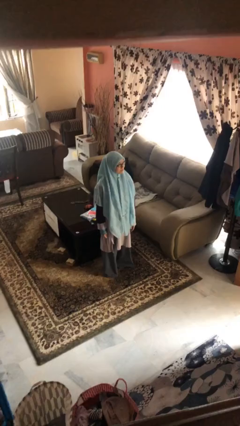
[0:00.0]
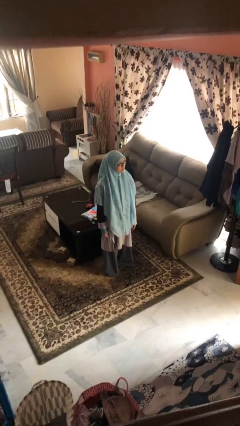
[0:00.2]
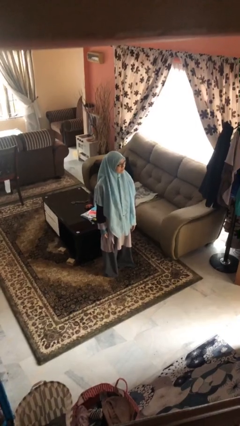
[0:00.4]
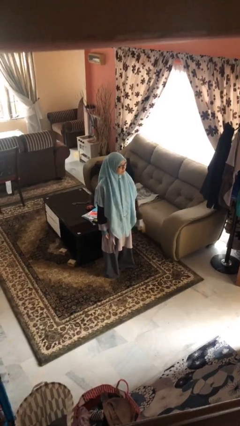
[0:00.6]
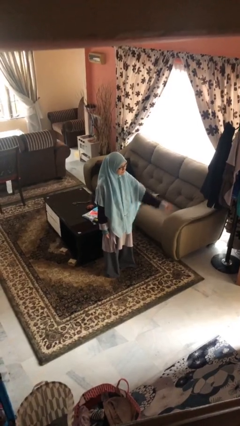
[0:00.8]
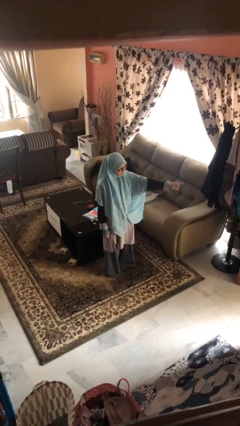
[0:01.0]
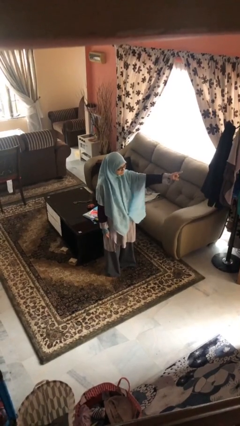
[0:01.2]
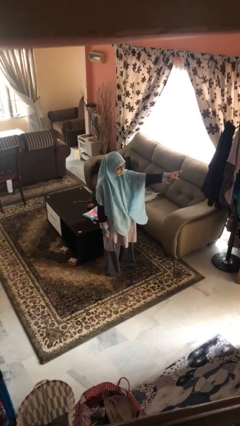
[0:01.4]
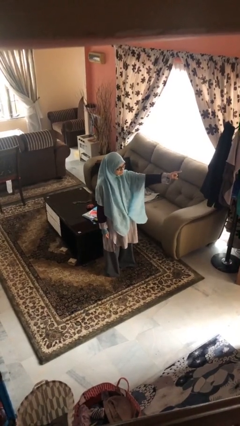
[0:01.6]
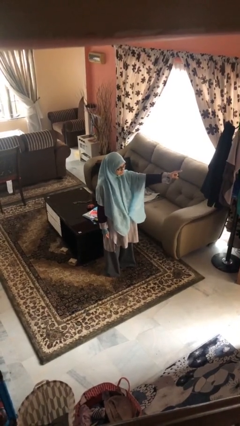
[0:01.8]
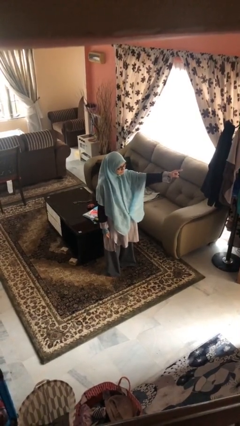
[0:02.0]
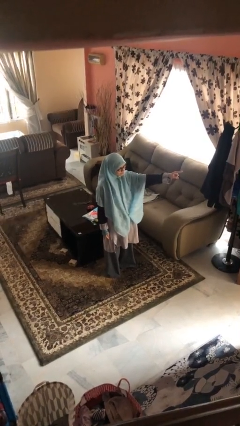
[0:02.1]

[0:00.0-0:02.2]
person points at person

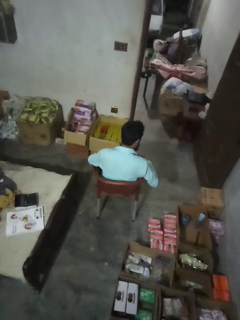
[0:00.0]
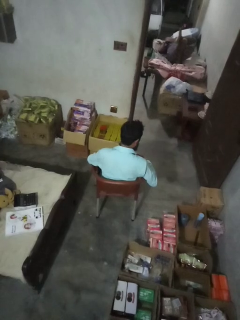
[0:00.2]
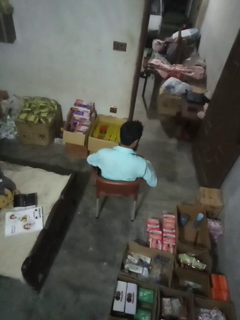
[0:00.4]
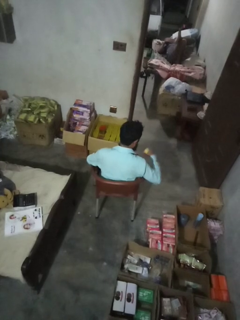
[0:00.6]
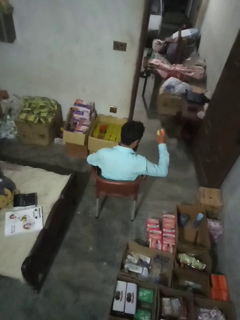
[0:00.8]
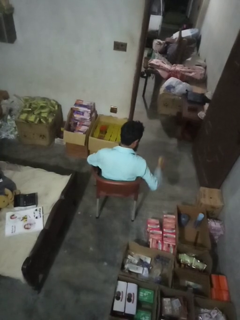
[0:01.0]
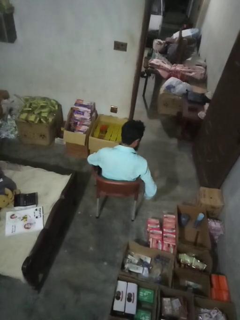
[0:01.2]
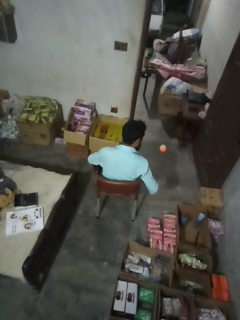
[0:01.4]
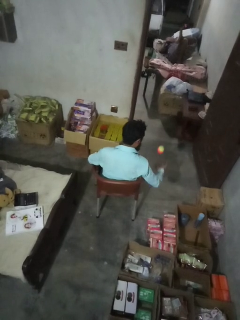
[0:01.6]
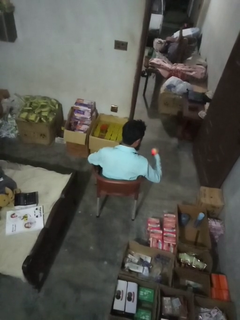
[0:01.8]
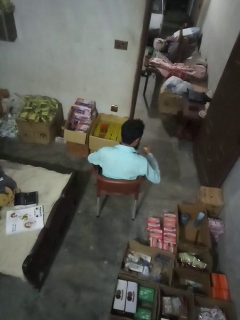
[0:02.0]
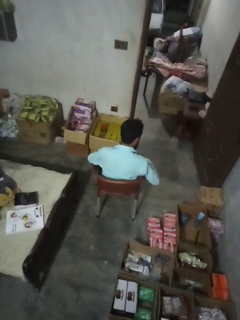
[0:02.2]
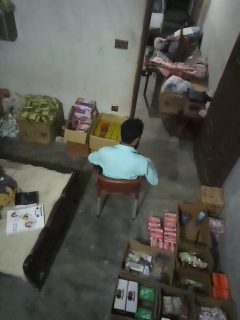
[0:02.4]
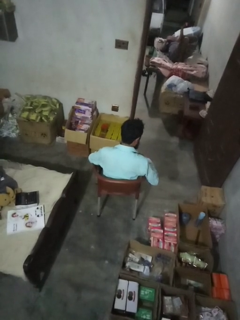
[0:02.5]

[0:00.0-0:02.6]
person bounces ball on floor

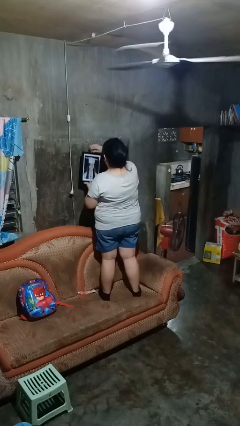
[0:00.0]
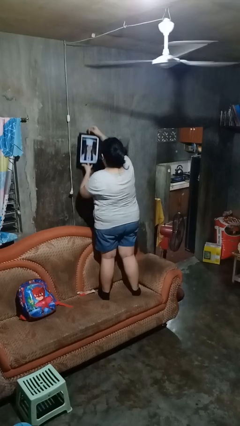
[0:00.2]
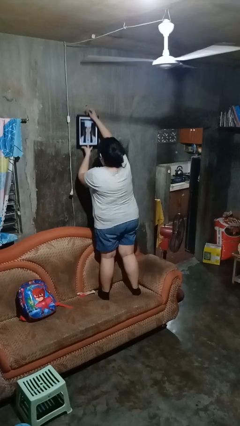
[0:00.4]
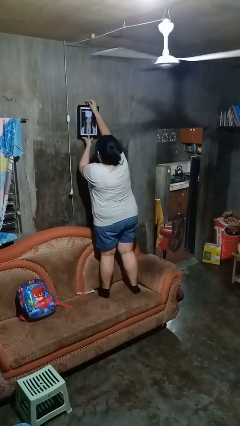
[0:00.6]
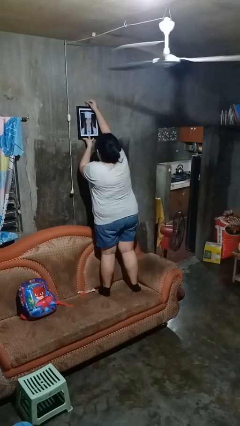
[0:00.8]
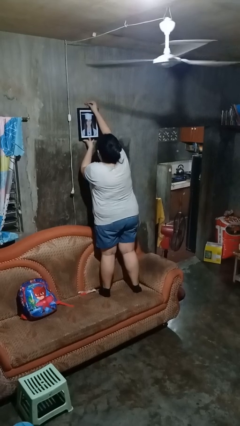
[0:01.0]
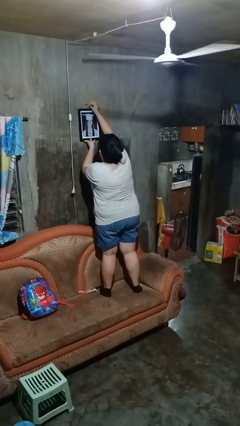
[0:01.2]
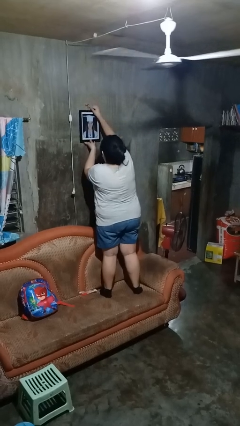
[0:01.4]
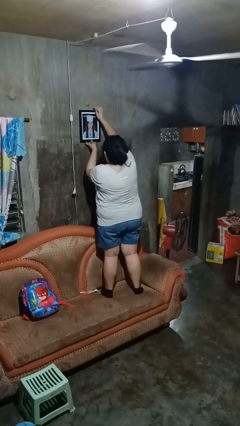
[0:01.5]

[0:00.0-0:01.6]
person puts up picture frame

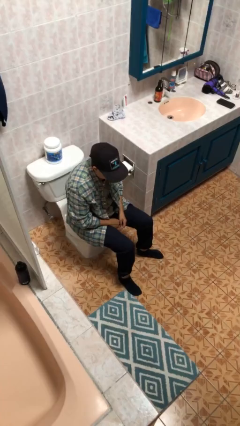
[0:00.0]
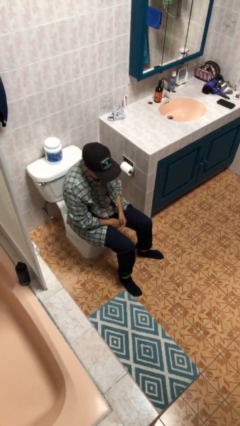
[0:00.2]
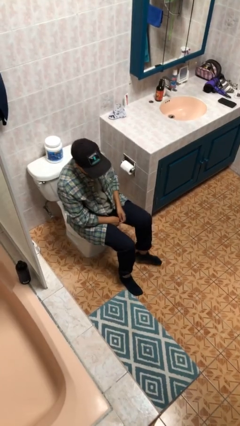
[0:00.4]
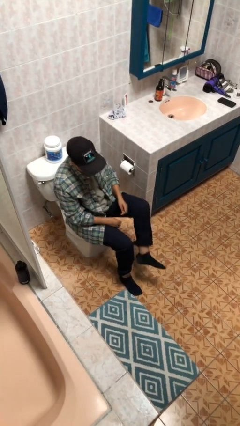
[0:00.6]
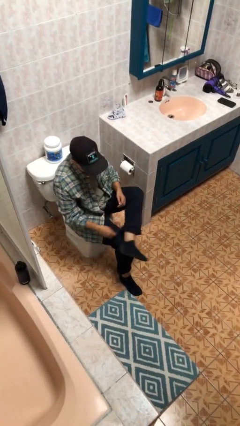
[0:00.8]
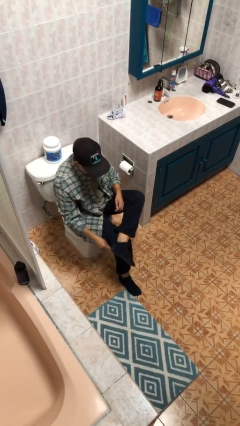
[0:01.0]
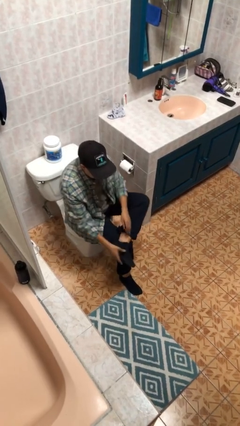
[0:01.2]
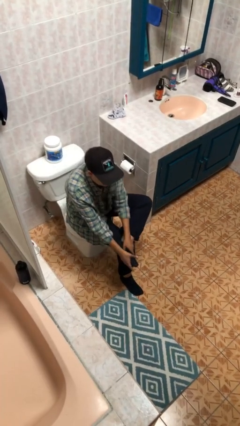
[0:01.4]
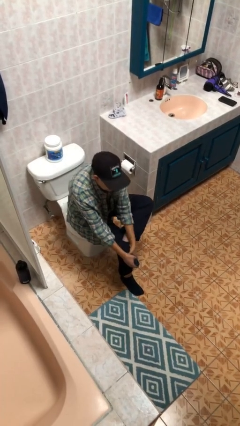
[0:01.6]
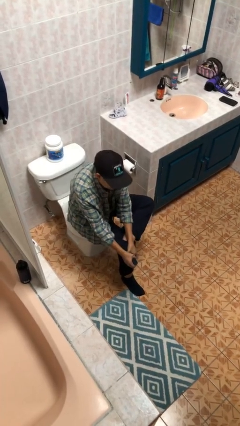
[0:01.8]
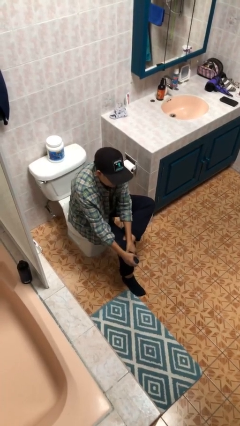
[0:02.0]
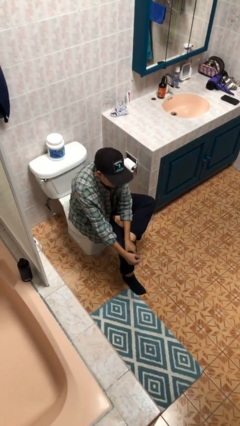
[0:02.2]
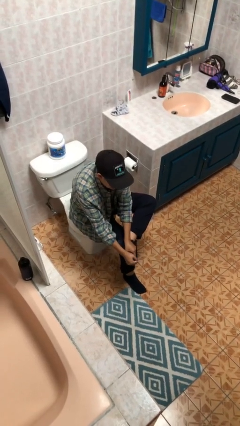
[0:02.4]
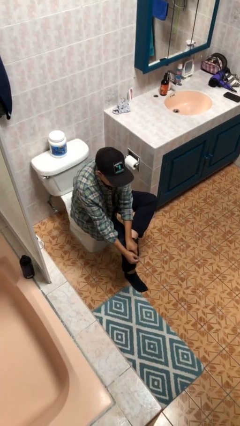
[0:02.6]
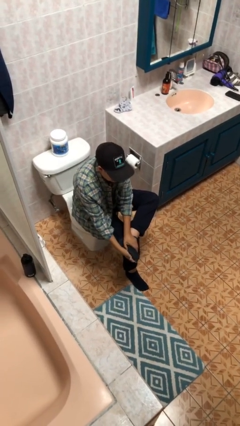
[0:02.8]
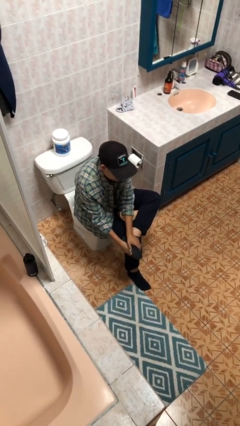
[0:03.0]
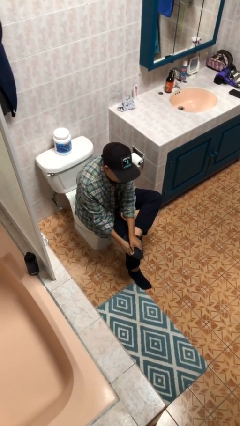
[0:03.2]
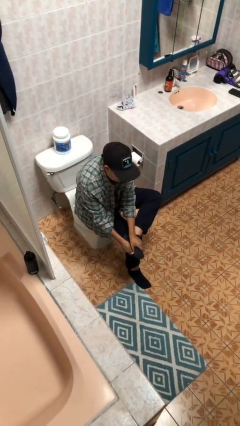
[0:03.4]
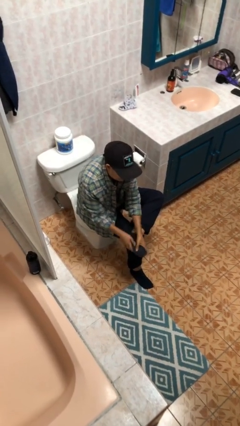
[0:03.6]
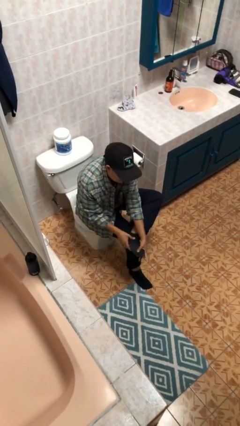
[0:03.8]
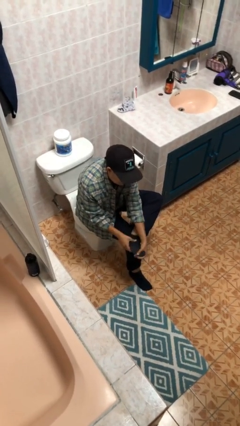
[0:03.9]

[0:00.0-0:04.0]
person rubs foot

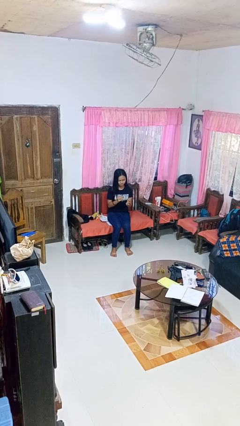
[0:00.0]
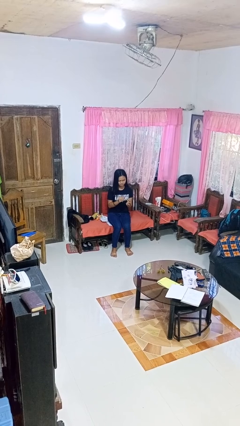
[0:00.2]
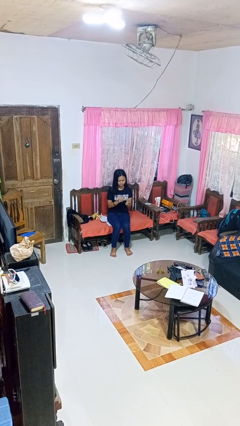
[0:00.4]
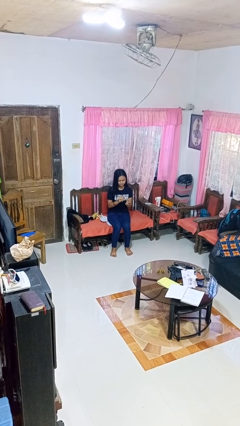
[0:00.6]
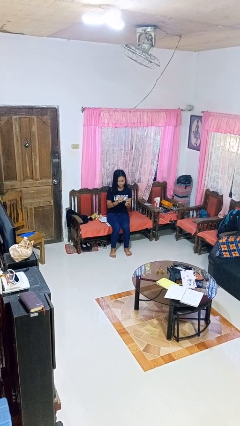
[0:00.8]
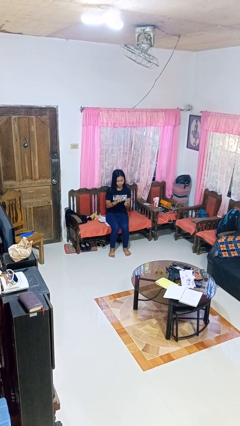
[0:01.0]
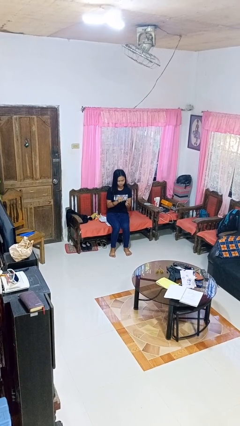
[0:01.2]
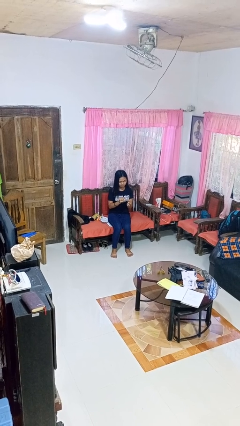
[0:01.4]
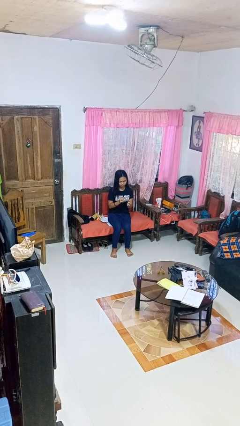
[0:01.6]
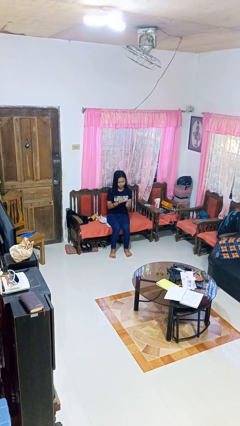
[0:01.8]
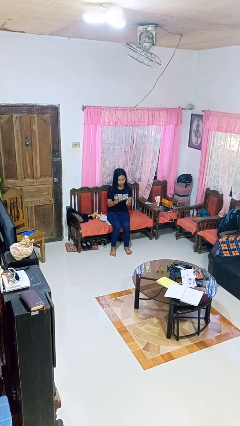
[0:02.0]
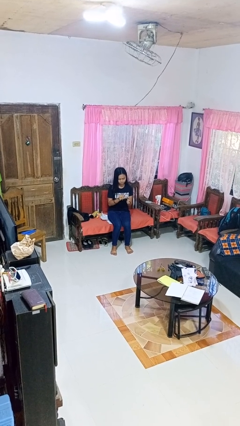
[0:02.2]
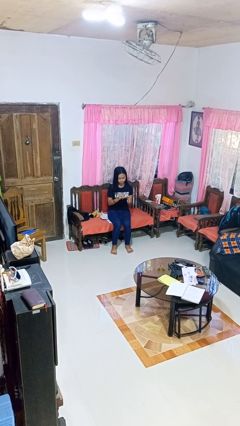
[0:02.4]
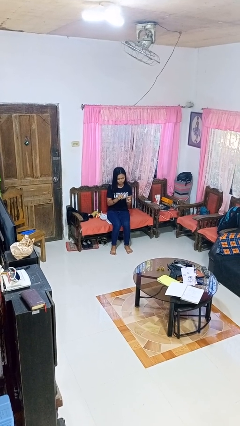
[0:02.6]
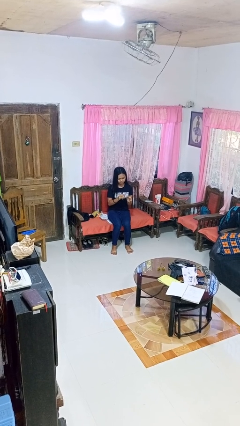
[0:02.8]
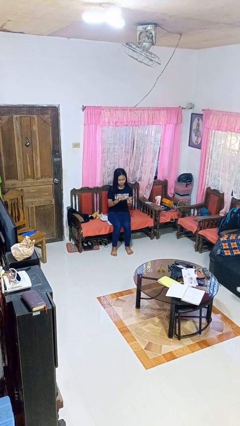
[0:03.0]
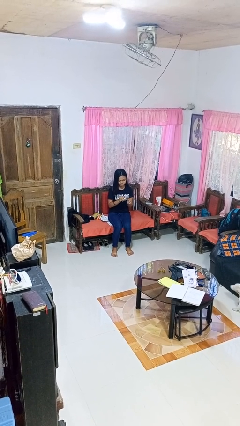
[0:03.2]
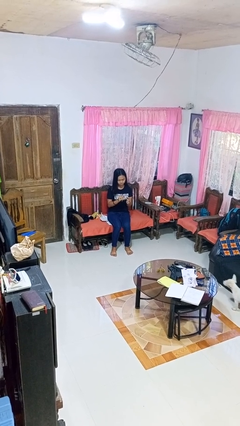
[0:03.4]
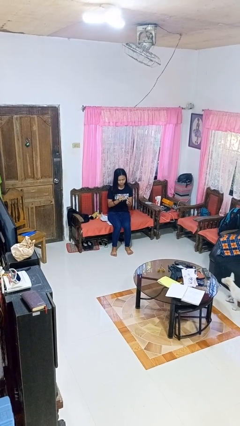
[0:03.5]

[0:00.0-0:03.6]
person clips fingernails

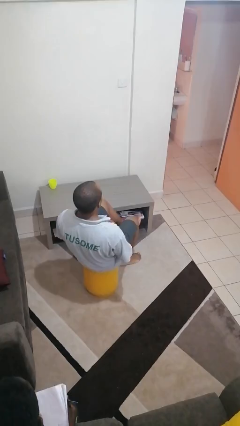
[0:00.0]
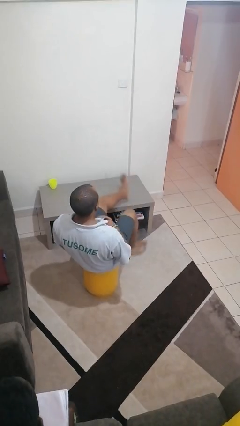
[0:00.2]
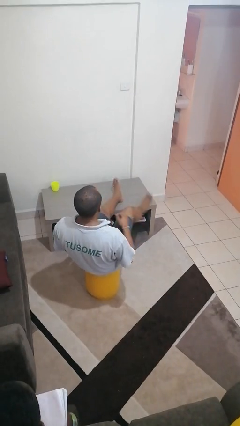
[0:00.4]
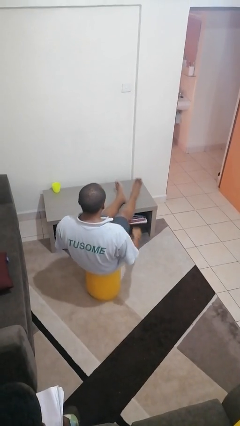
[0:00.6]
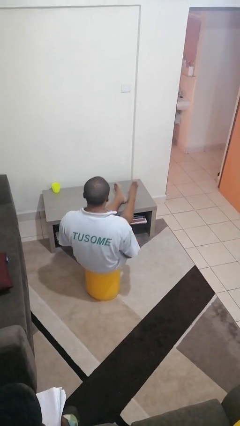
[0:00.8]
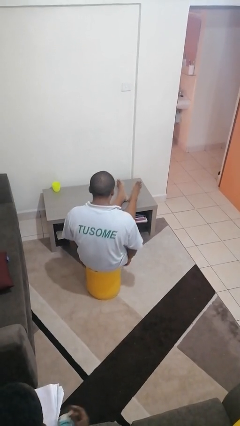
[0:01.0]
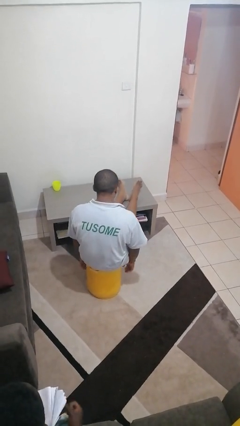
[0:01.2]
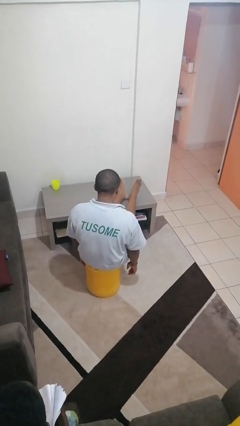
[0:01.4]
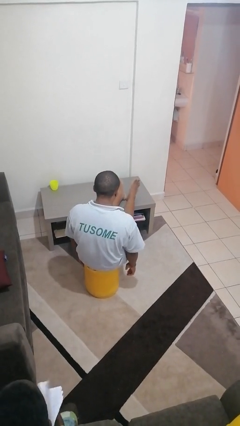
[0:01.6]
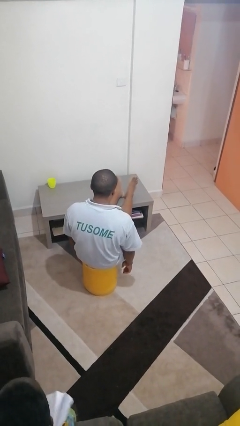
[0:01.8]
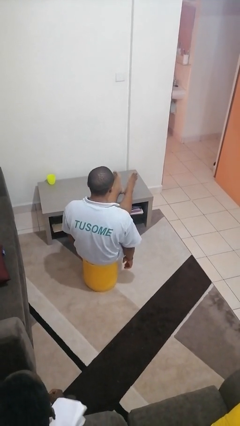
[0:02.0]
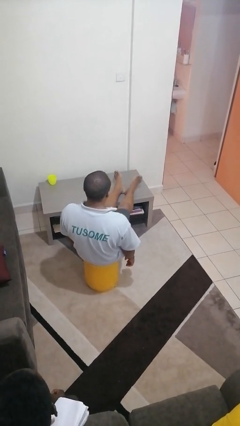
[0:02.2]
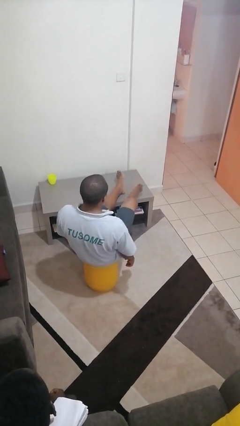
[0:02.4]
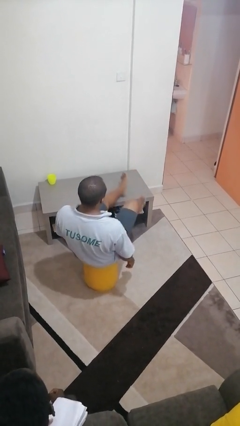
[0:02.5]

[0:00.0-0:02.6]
person puts feet up

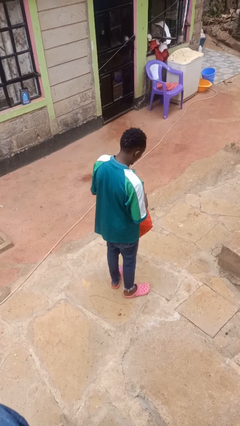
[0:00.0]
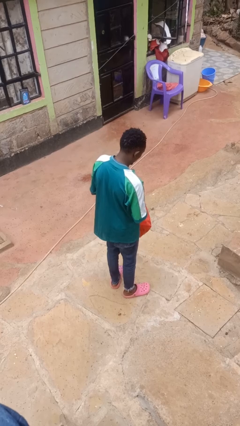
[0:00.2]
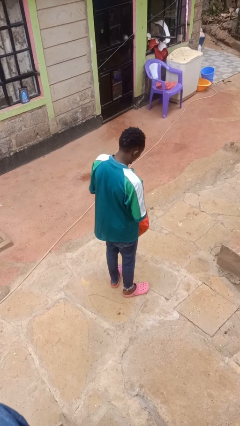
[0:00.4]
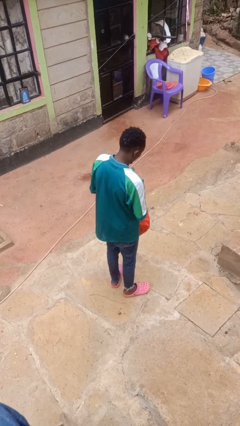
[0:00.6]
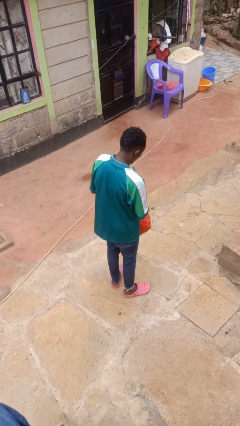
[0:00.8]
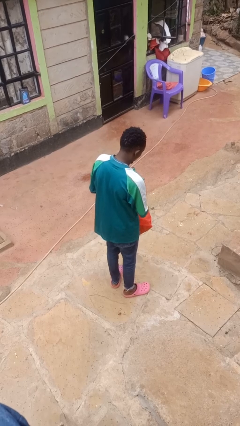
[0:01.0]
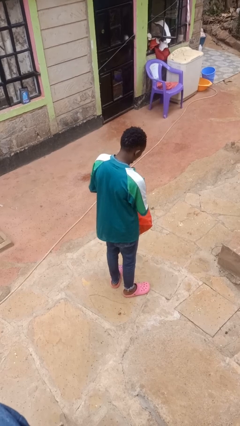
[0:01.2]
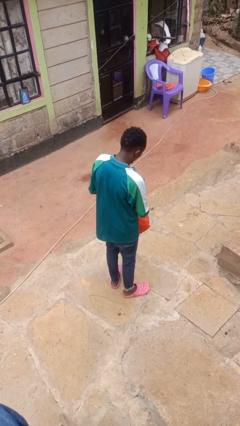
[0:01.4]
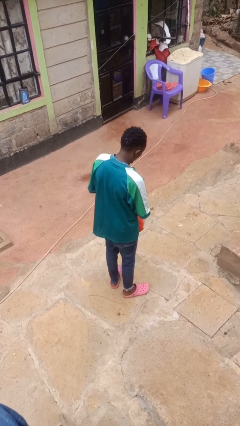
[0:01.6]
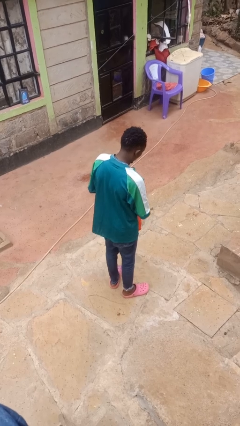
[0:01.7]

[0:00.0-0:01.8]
person puts object into bag
